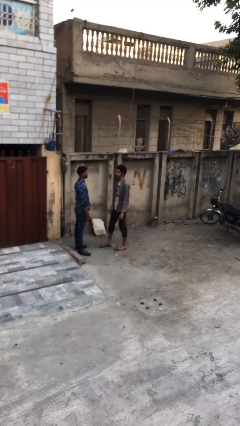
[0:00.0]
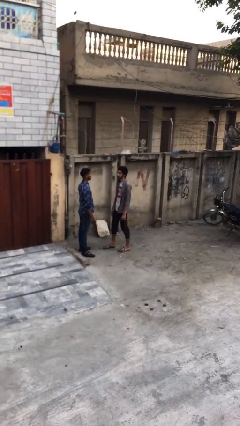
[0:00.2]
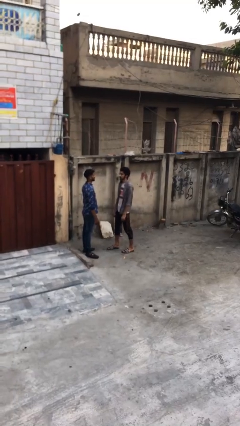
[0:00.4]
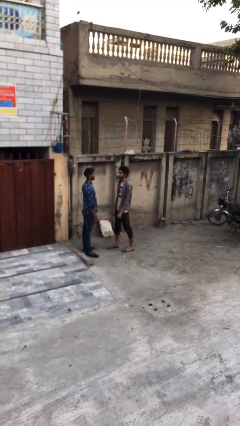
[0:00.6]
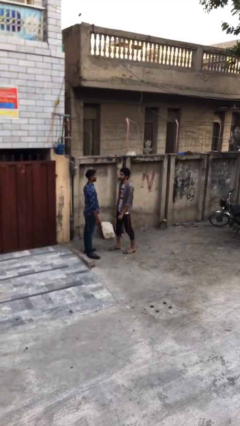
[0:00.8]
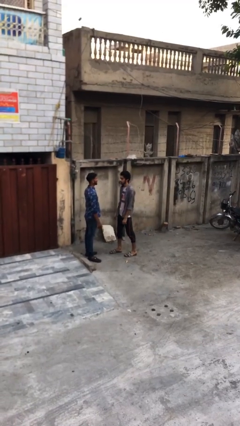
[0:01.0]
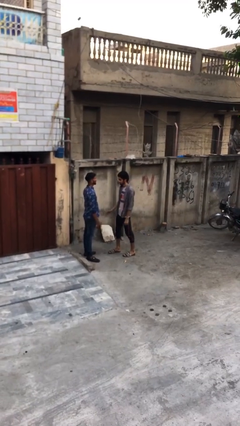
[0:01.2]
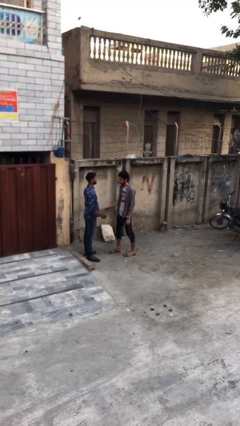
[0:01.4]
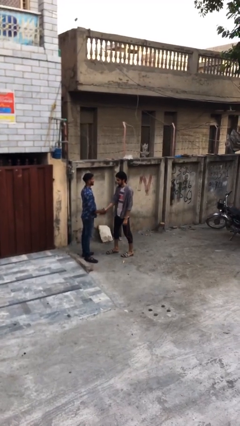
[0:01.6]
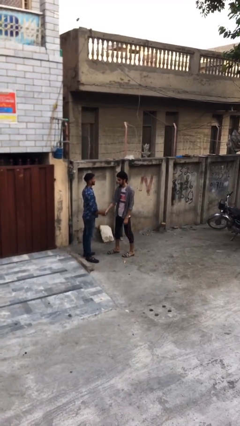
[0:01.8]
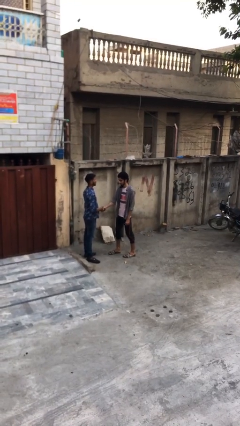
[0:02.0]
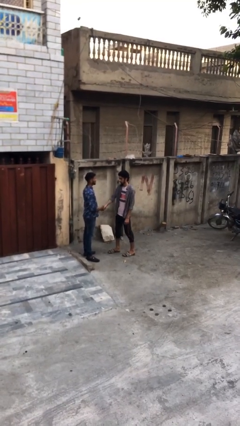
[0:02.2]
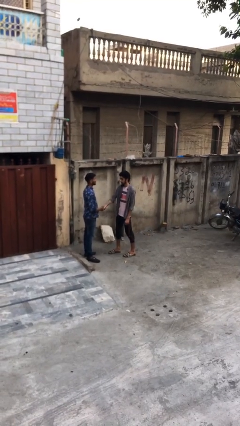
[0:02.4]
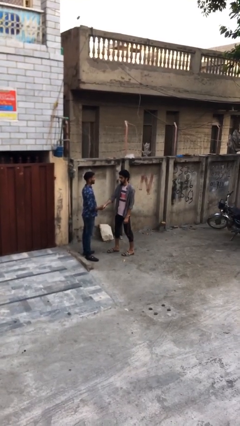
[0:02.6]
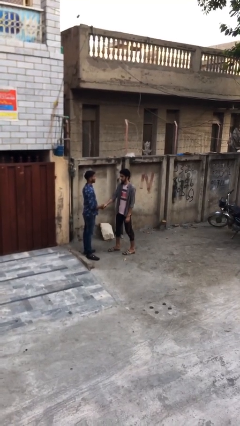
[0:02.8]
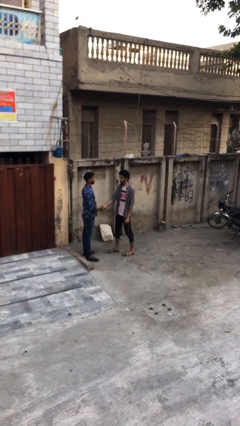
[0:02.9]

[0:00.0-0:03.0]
person shakes hand

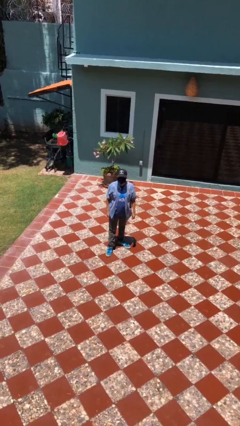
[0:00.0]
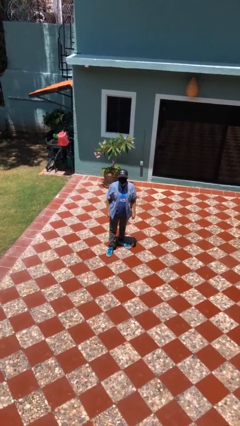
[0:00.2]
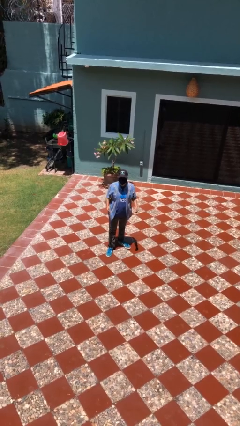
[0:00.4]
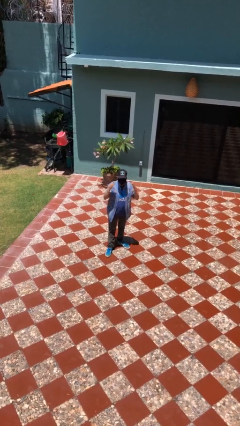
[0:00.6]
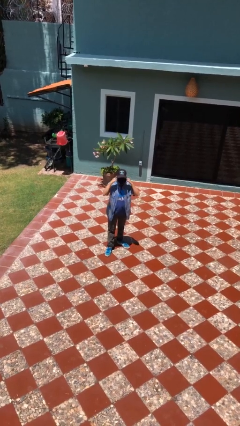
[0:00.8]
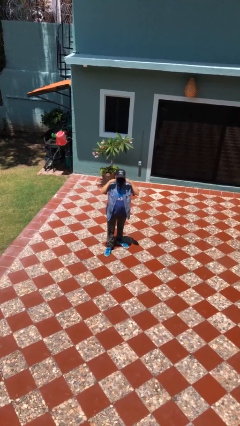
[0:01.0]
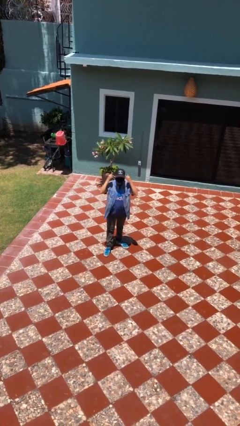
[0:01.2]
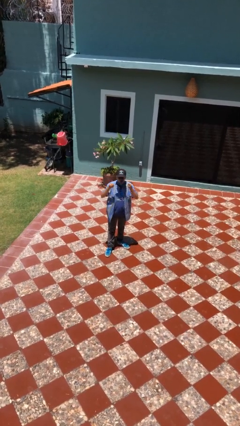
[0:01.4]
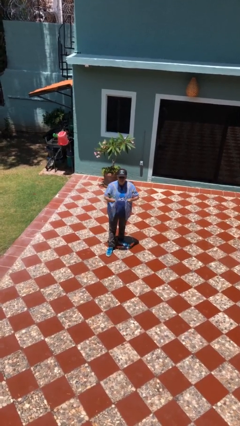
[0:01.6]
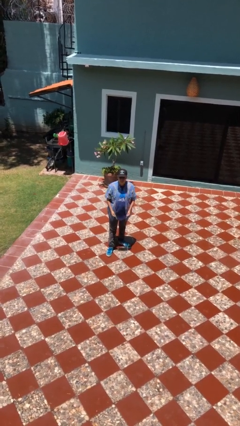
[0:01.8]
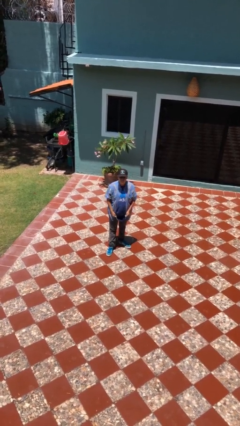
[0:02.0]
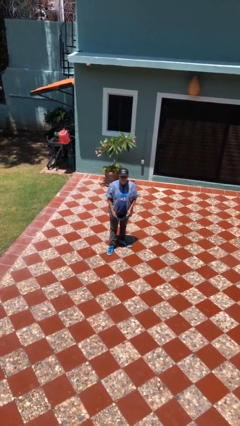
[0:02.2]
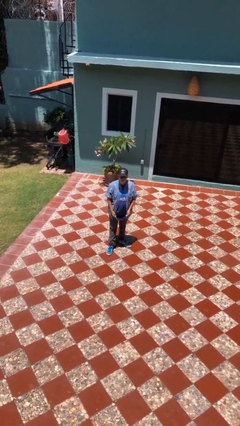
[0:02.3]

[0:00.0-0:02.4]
person takes off facemask

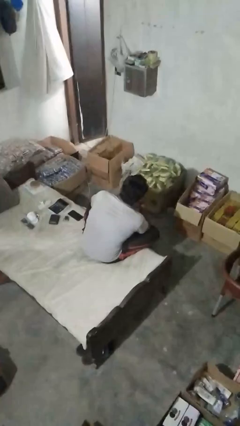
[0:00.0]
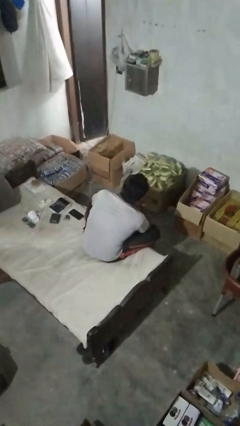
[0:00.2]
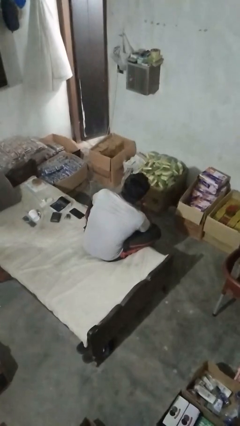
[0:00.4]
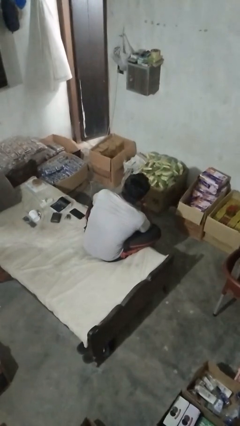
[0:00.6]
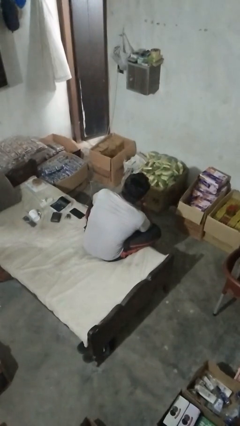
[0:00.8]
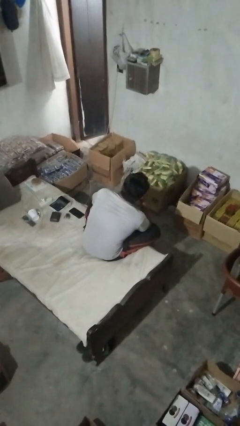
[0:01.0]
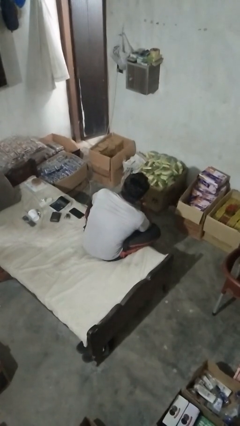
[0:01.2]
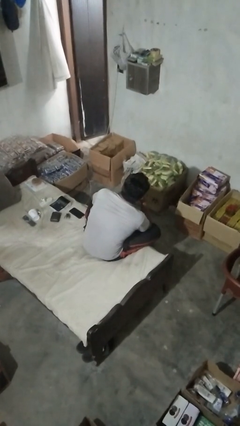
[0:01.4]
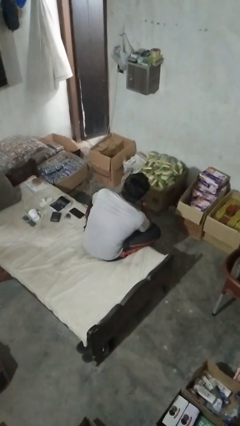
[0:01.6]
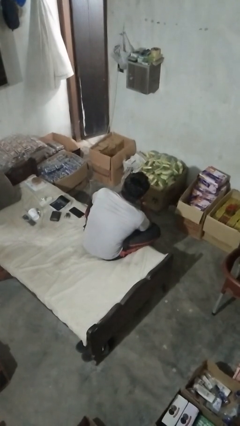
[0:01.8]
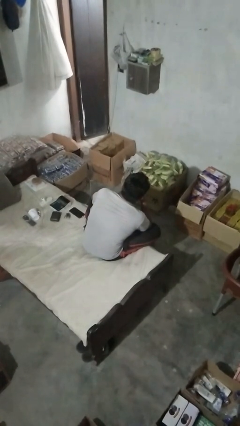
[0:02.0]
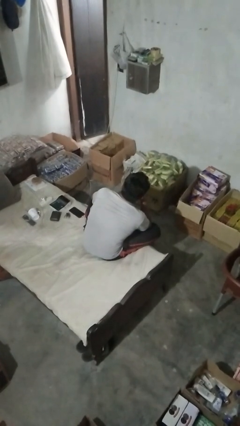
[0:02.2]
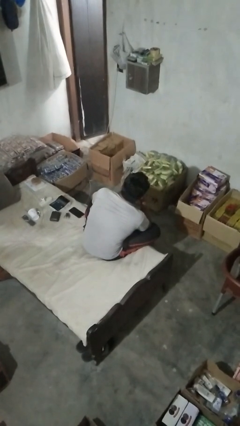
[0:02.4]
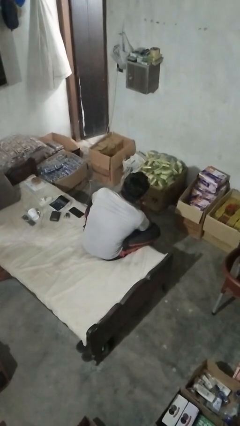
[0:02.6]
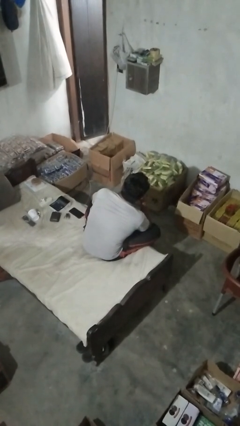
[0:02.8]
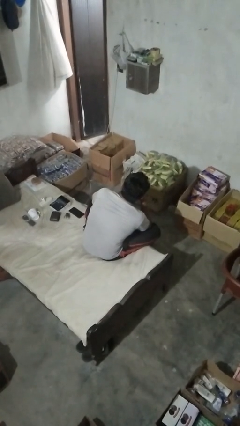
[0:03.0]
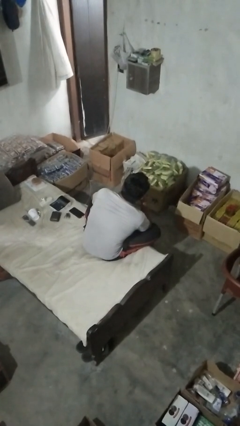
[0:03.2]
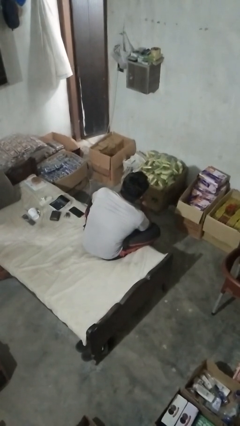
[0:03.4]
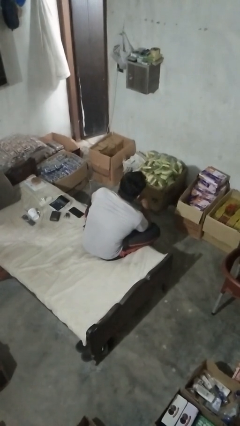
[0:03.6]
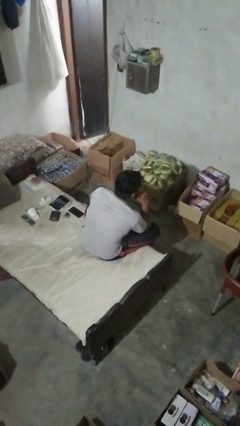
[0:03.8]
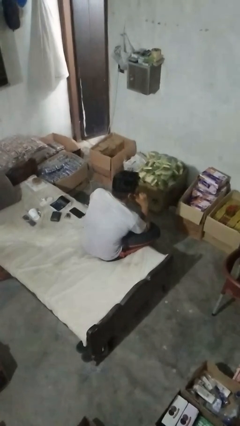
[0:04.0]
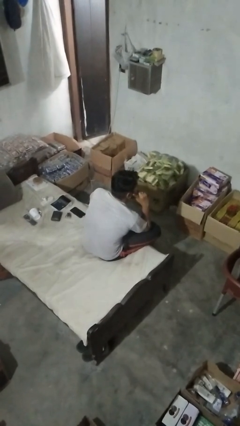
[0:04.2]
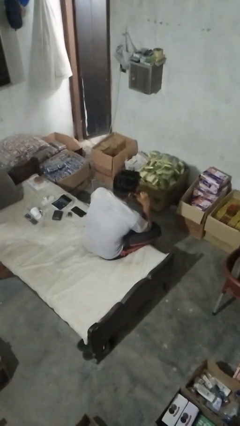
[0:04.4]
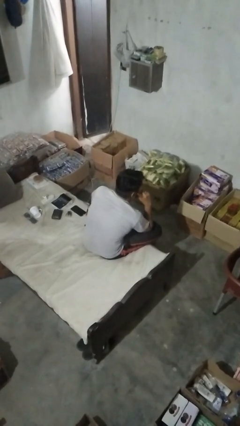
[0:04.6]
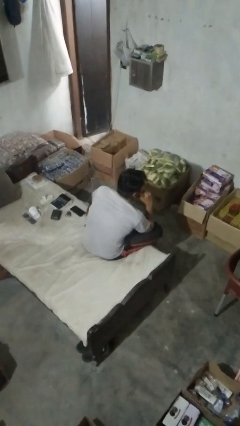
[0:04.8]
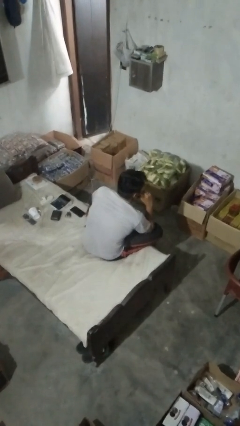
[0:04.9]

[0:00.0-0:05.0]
person strokes chin

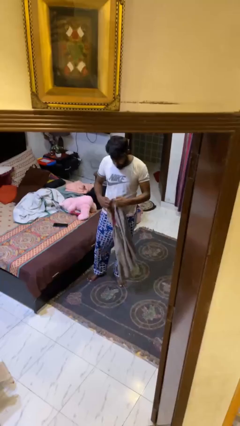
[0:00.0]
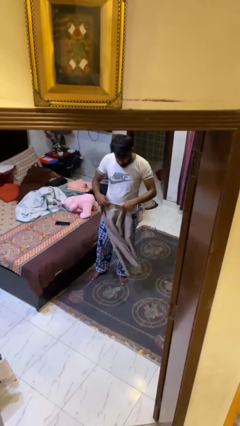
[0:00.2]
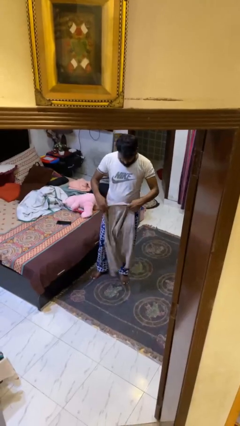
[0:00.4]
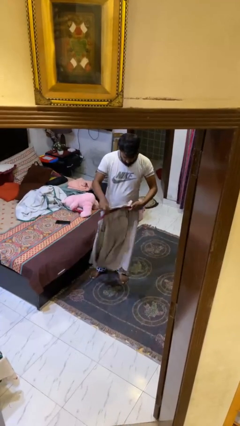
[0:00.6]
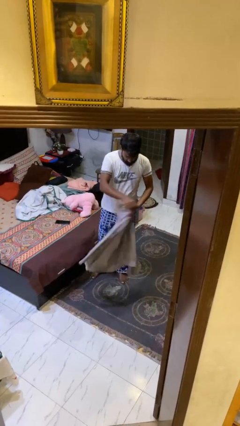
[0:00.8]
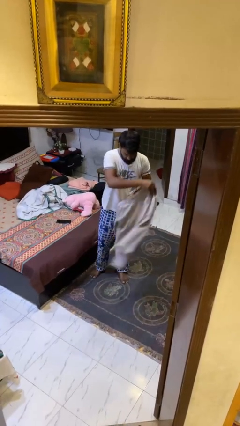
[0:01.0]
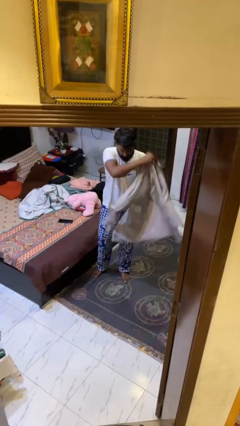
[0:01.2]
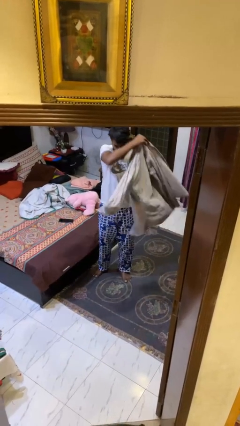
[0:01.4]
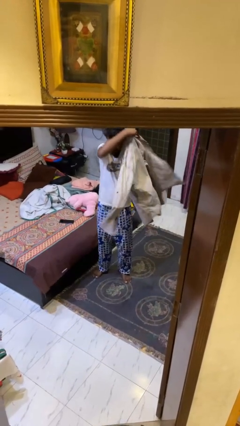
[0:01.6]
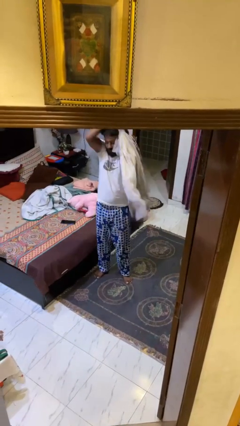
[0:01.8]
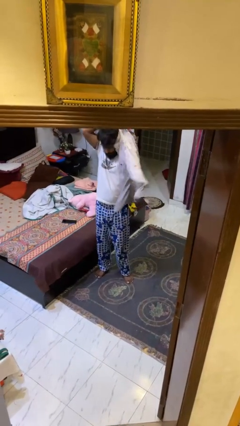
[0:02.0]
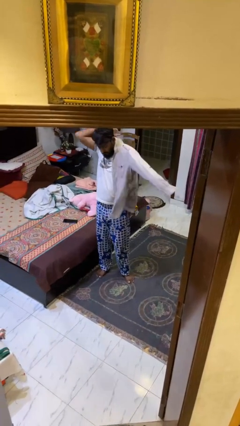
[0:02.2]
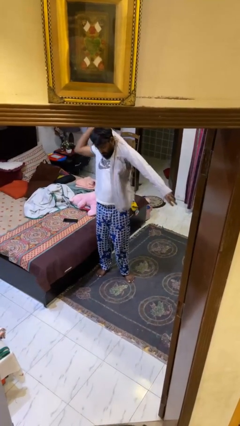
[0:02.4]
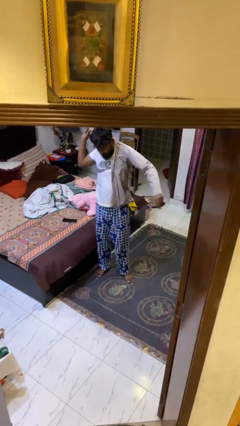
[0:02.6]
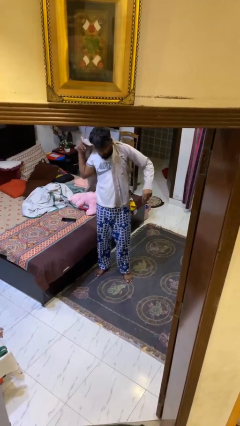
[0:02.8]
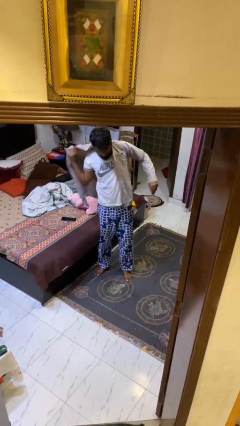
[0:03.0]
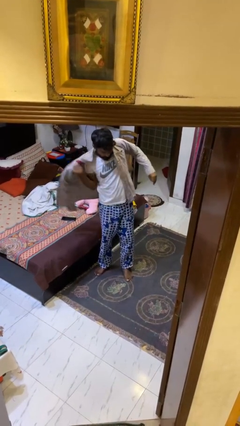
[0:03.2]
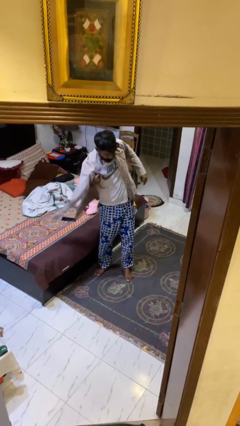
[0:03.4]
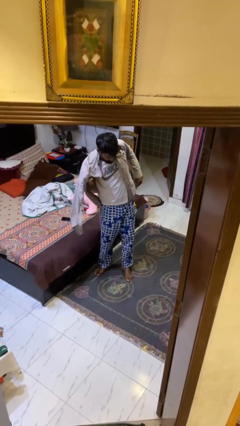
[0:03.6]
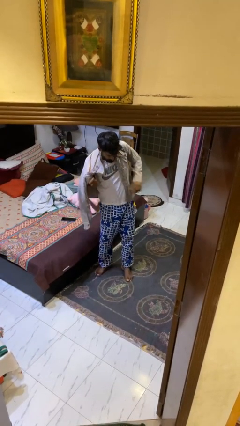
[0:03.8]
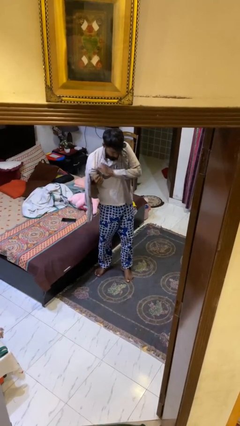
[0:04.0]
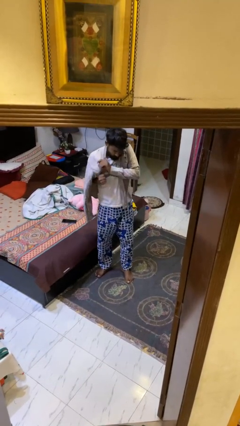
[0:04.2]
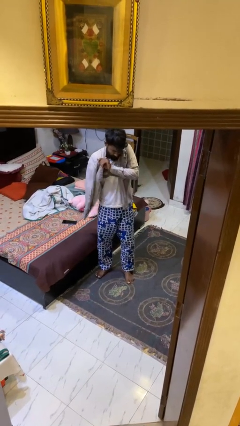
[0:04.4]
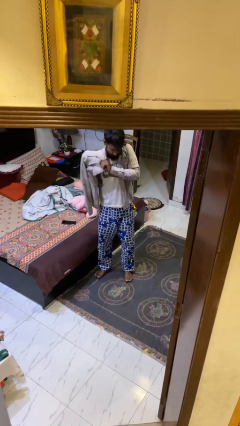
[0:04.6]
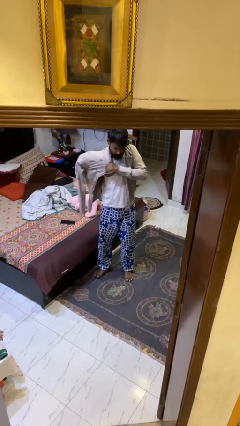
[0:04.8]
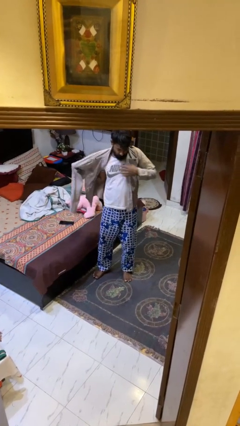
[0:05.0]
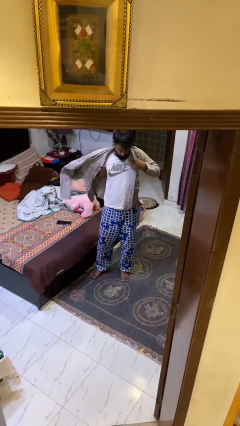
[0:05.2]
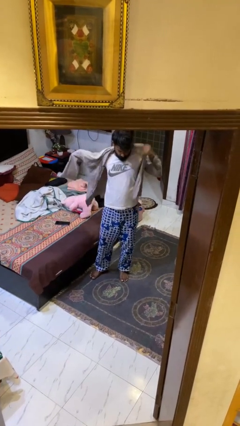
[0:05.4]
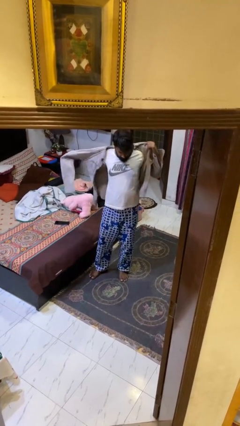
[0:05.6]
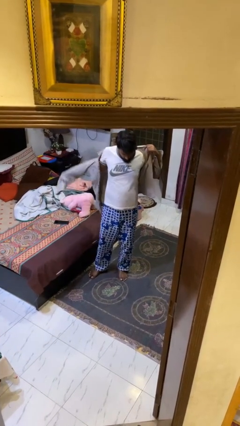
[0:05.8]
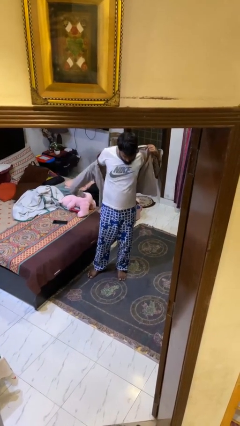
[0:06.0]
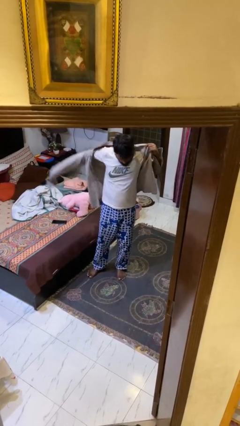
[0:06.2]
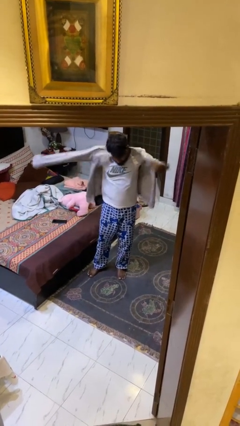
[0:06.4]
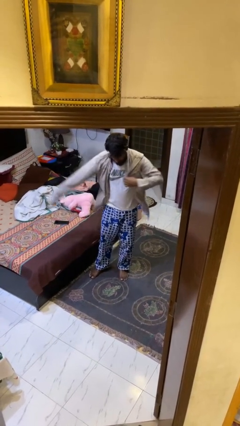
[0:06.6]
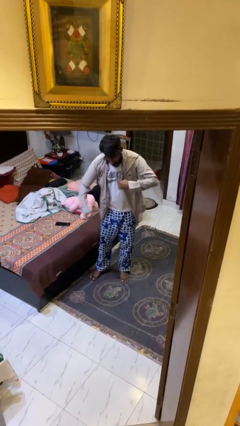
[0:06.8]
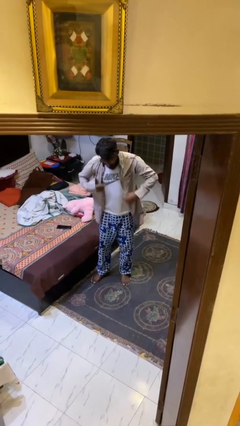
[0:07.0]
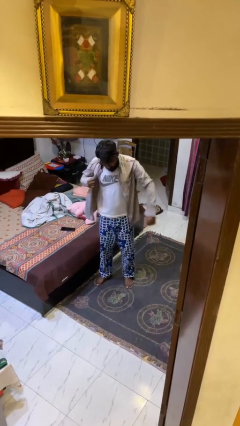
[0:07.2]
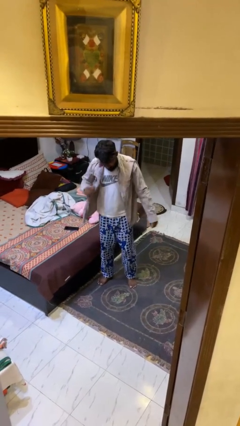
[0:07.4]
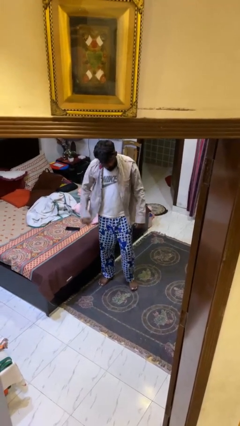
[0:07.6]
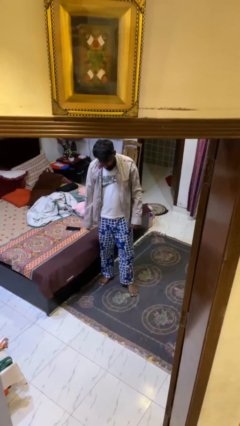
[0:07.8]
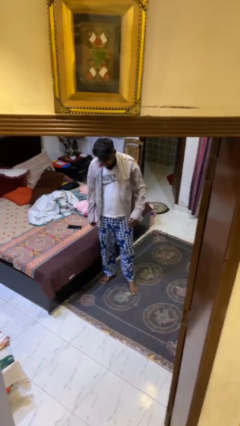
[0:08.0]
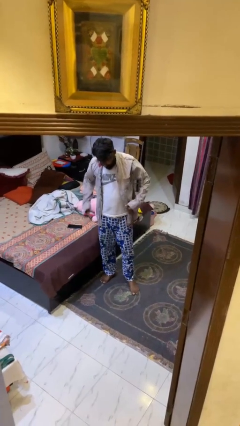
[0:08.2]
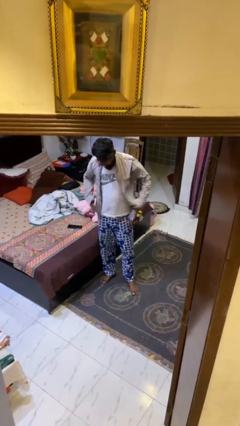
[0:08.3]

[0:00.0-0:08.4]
person puts on shirt
